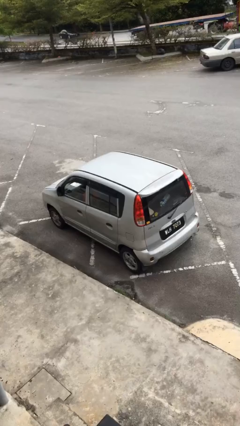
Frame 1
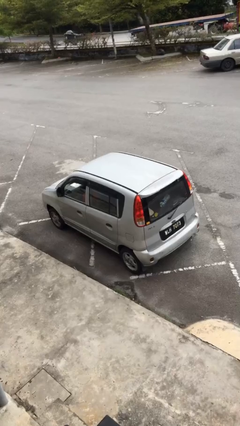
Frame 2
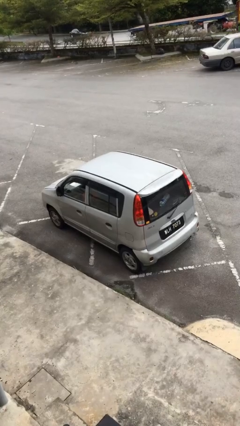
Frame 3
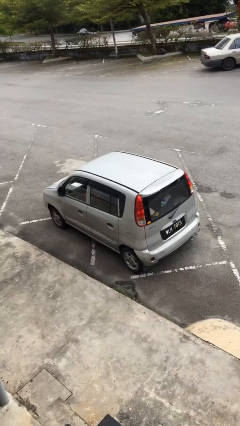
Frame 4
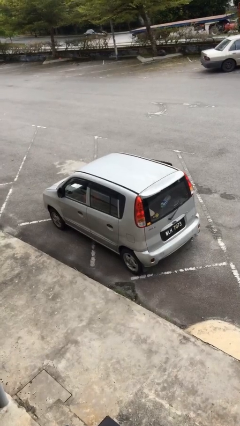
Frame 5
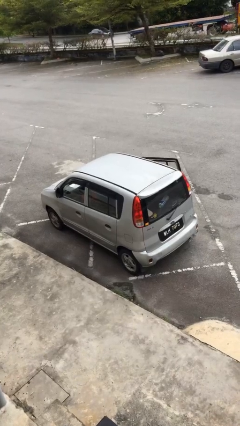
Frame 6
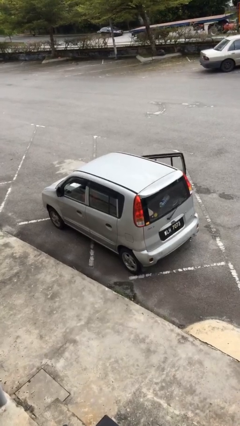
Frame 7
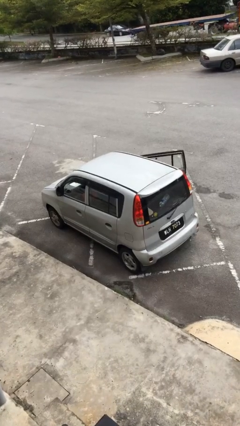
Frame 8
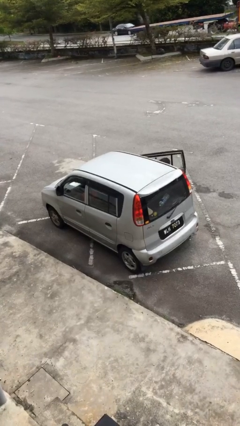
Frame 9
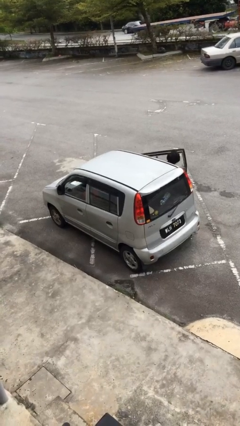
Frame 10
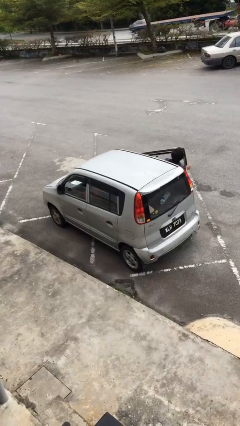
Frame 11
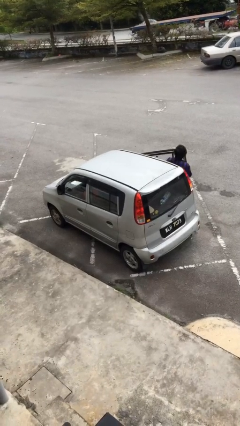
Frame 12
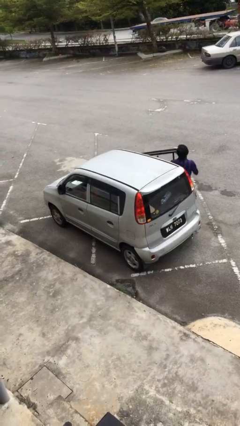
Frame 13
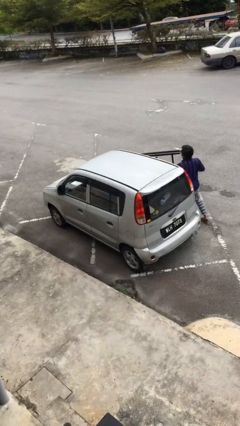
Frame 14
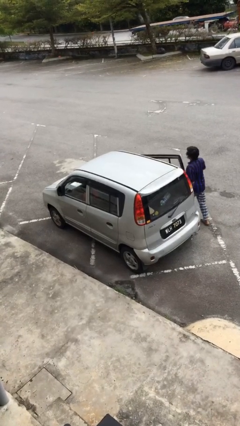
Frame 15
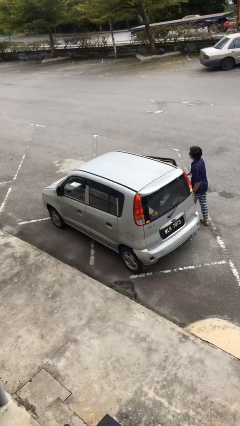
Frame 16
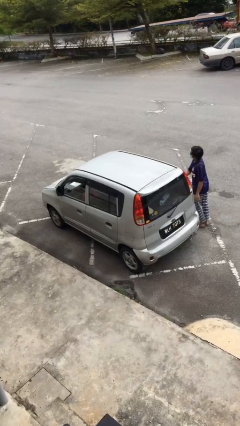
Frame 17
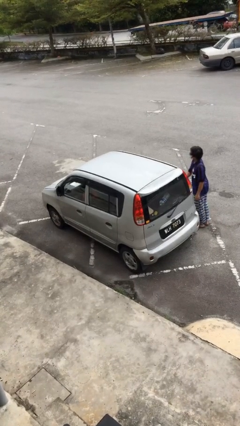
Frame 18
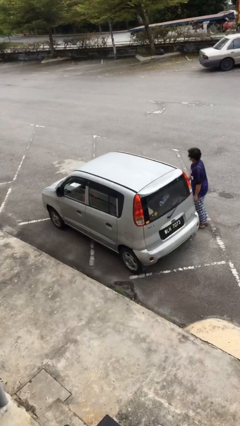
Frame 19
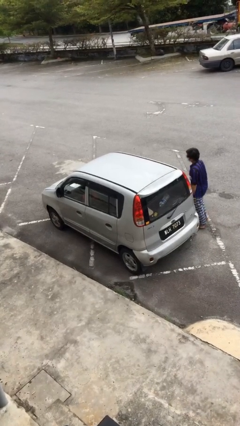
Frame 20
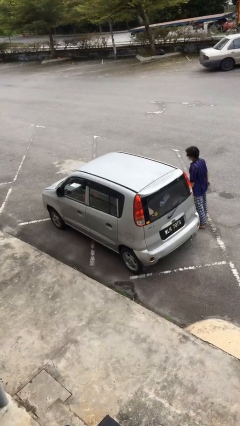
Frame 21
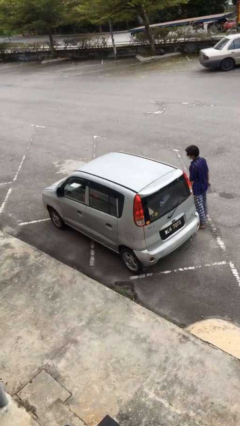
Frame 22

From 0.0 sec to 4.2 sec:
car drops off person

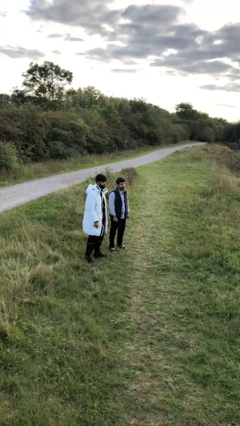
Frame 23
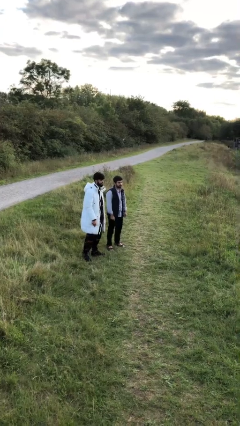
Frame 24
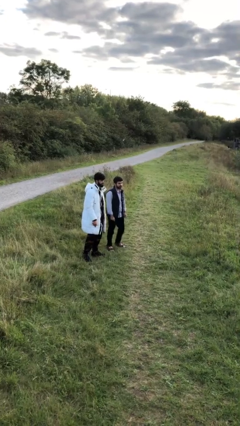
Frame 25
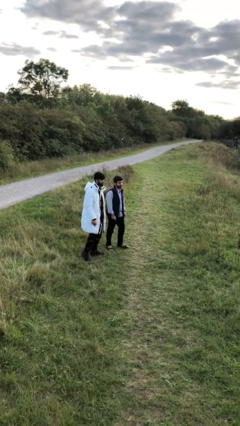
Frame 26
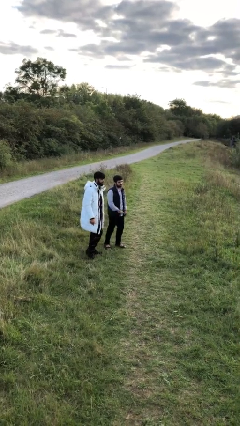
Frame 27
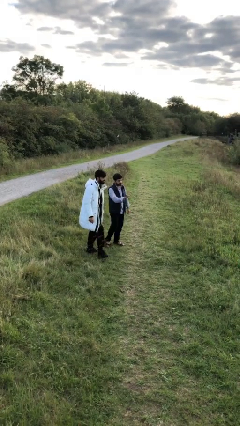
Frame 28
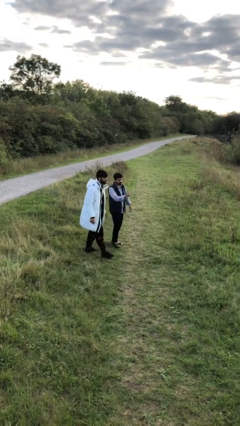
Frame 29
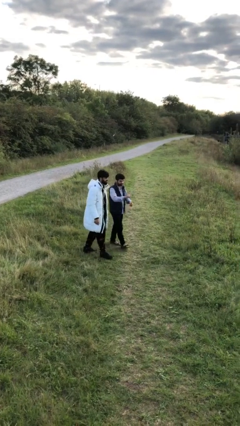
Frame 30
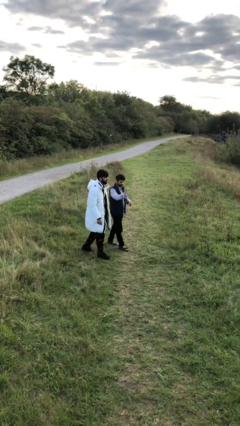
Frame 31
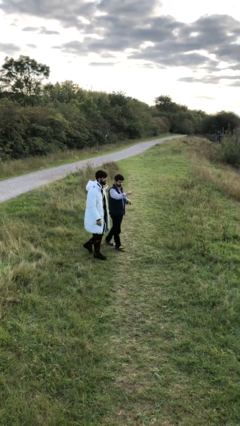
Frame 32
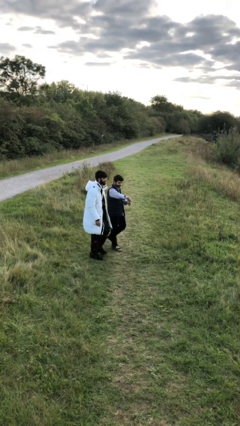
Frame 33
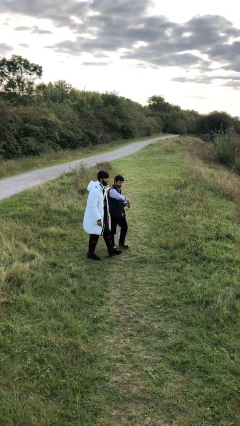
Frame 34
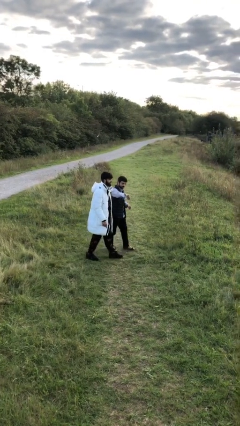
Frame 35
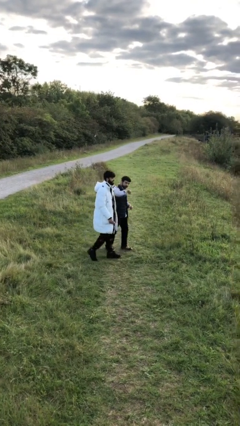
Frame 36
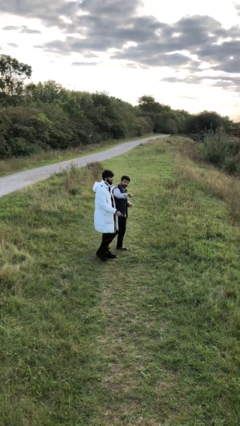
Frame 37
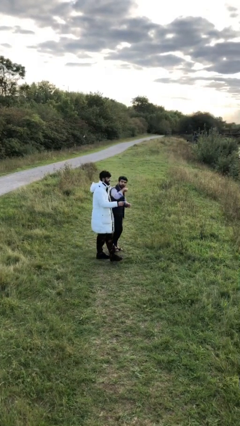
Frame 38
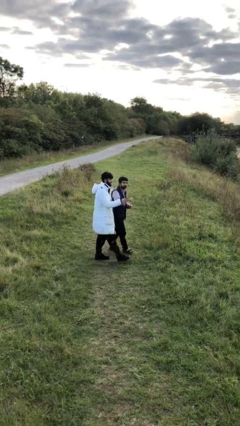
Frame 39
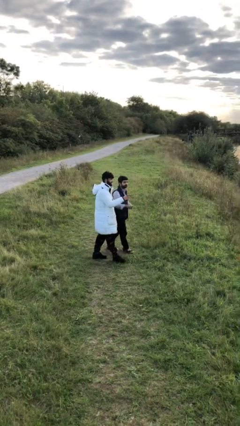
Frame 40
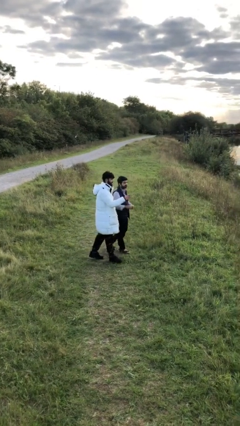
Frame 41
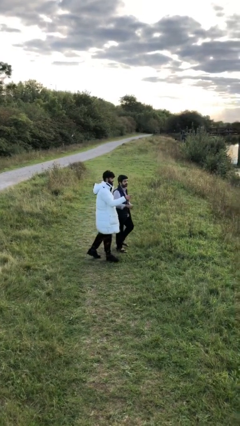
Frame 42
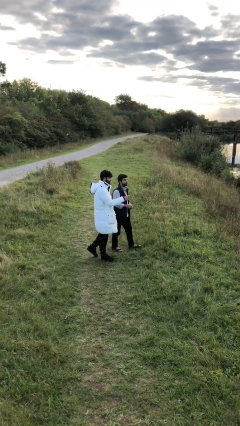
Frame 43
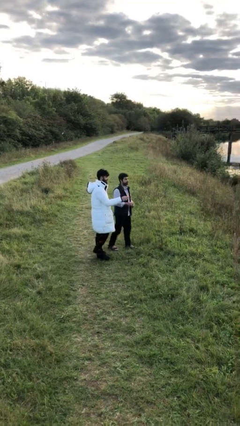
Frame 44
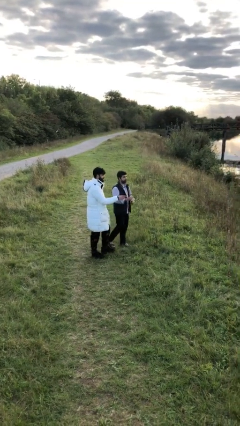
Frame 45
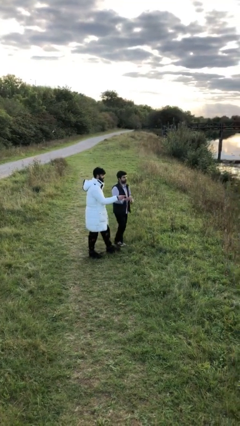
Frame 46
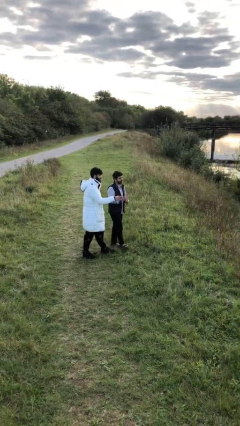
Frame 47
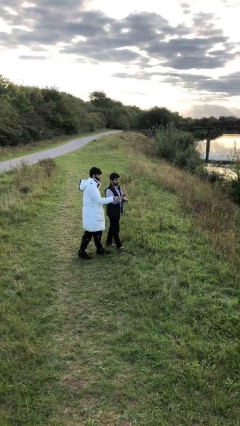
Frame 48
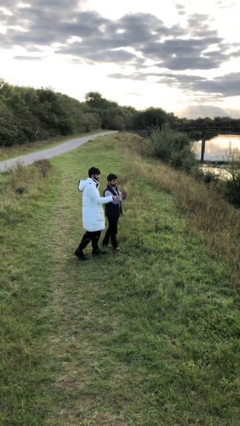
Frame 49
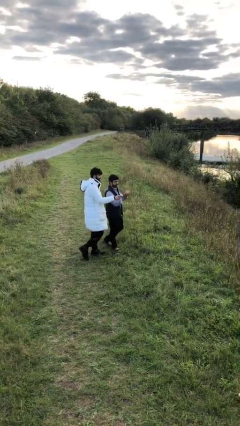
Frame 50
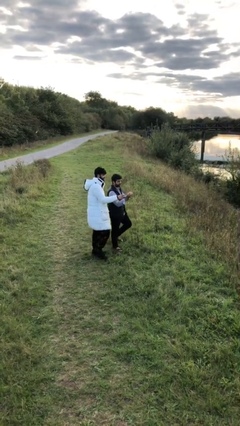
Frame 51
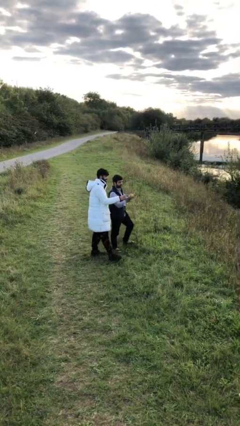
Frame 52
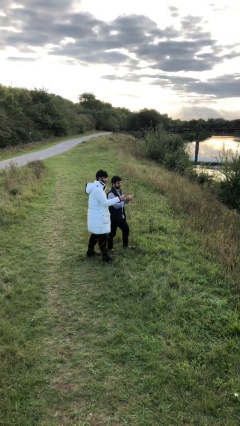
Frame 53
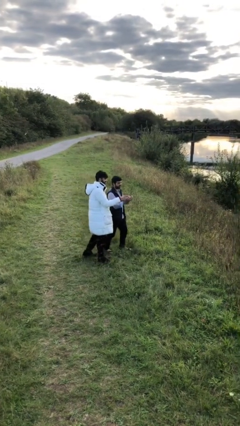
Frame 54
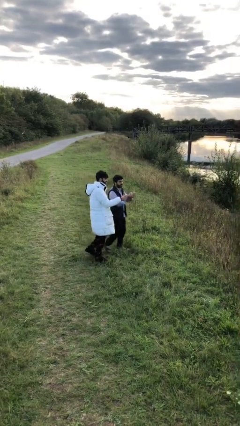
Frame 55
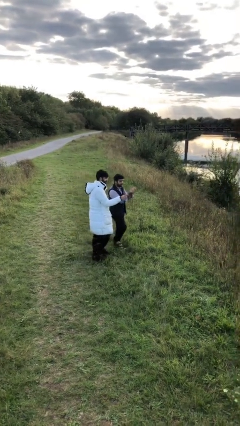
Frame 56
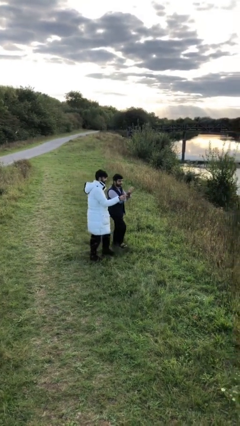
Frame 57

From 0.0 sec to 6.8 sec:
person talks to person

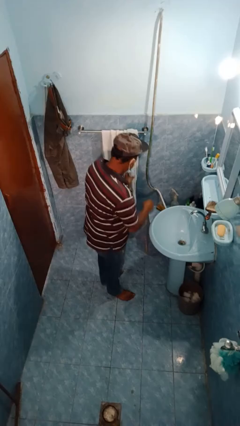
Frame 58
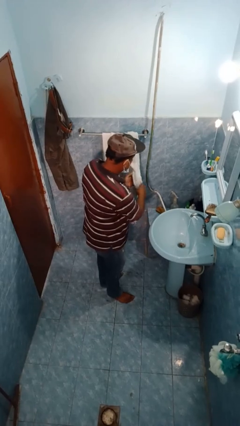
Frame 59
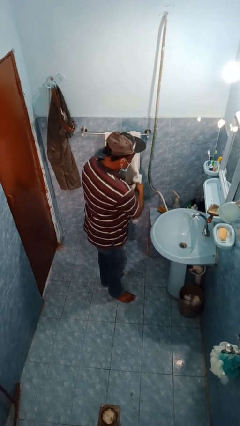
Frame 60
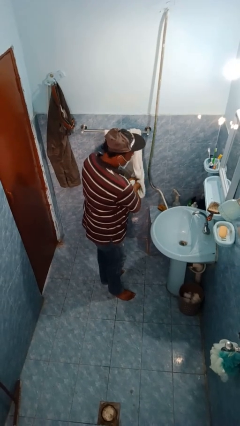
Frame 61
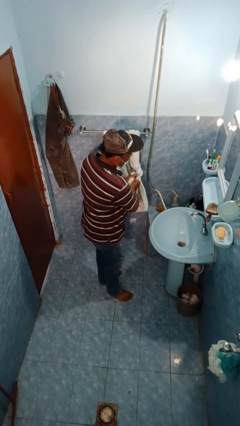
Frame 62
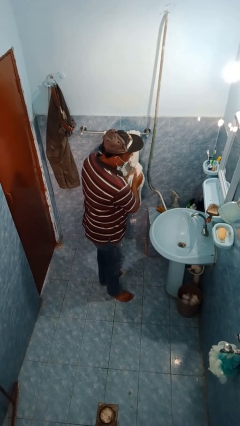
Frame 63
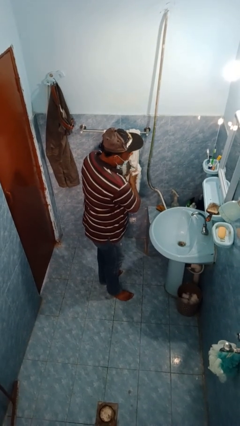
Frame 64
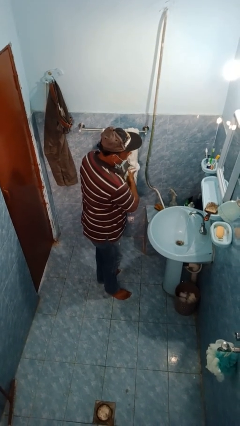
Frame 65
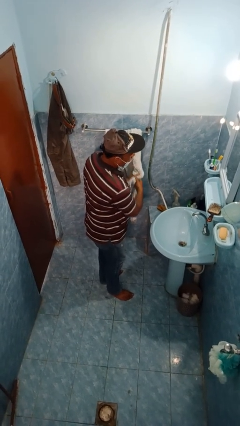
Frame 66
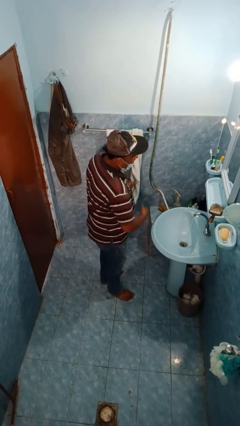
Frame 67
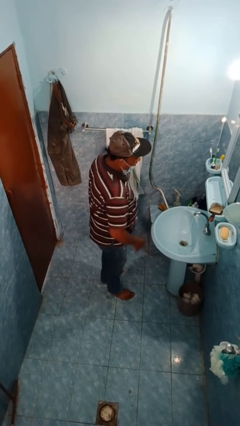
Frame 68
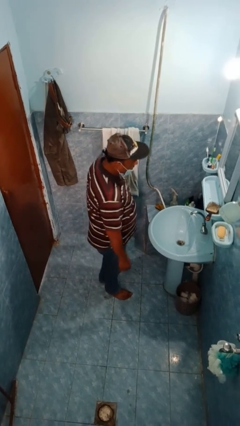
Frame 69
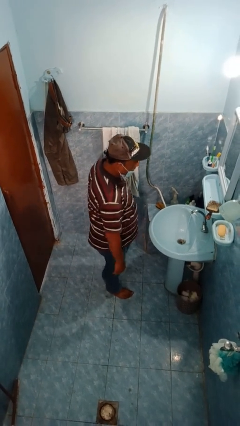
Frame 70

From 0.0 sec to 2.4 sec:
person dries hands with towel

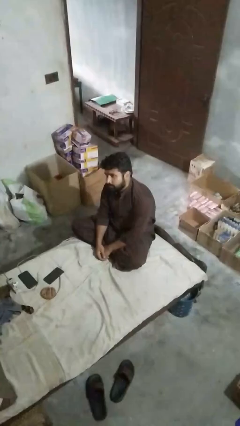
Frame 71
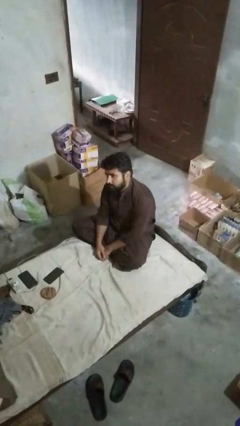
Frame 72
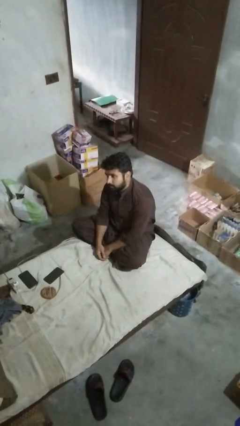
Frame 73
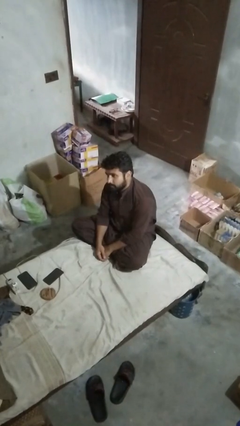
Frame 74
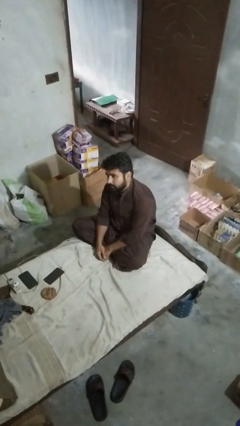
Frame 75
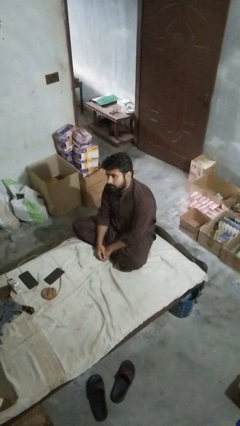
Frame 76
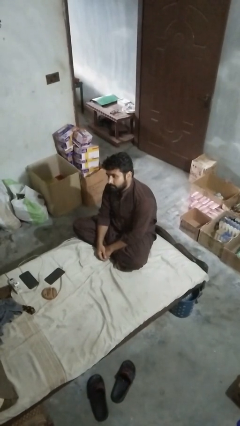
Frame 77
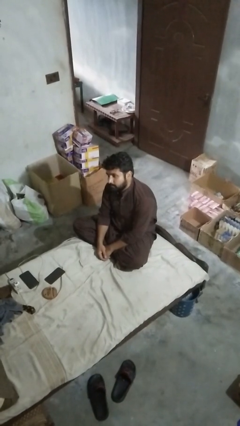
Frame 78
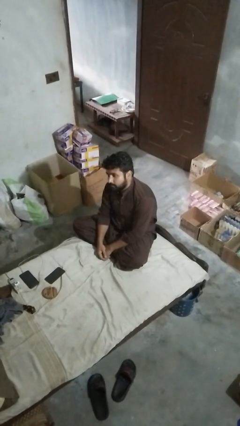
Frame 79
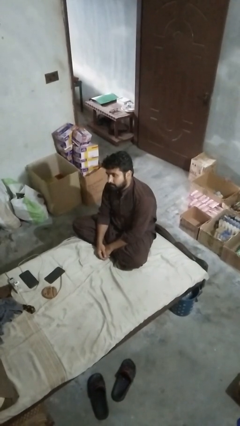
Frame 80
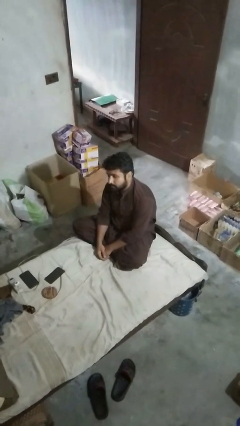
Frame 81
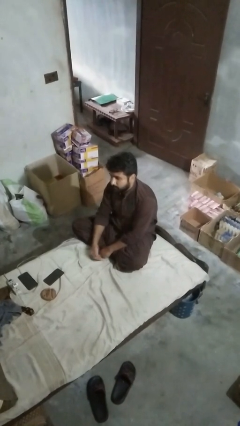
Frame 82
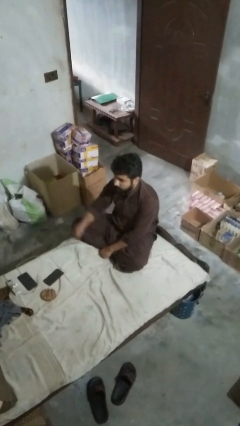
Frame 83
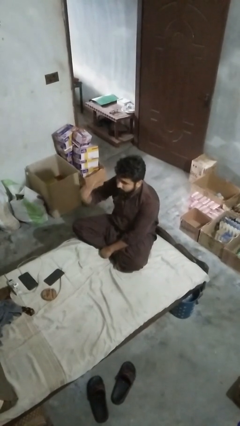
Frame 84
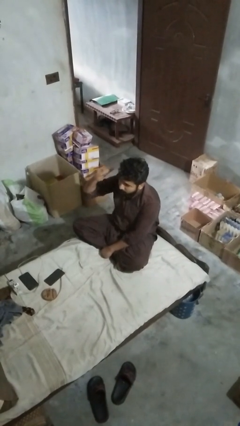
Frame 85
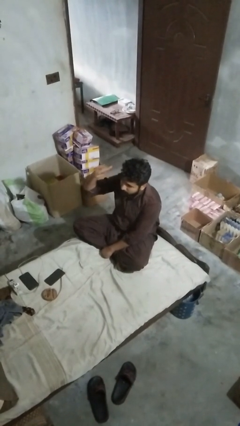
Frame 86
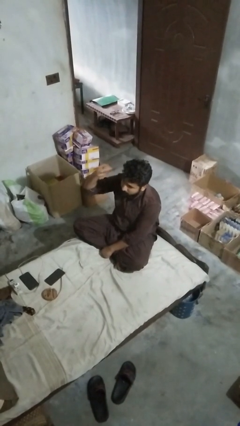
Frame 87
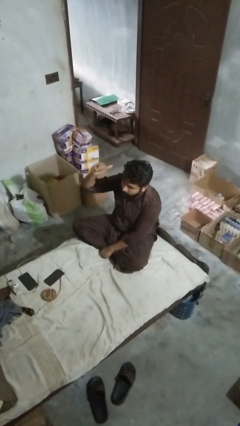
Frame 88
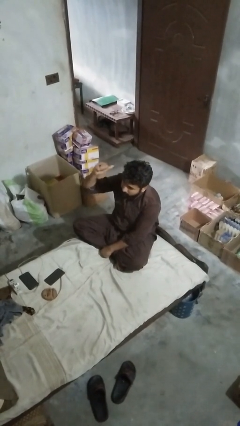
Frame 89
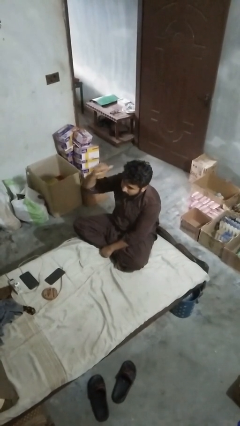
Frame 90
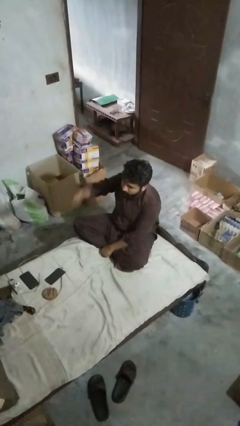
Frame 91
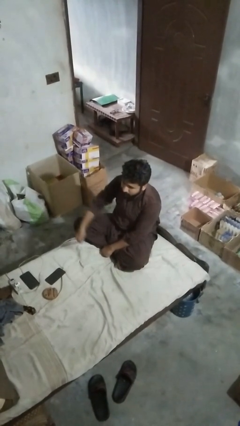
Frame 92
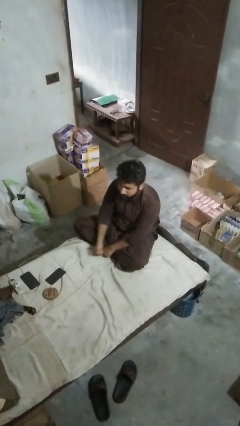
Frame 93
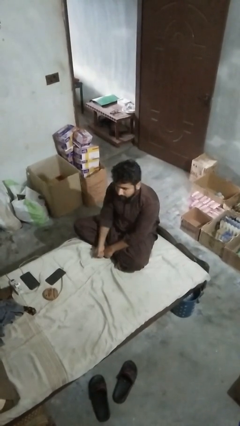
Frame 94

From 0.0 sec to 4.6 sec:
person gestures behind me

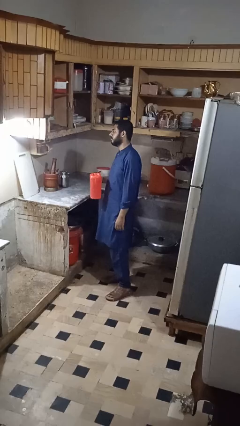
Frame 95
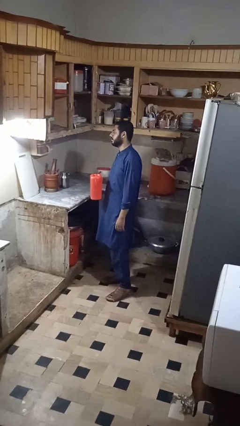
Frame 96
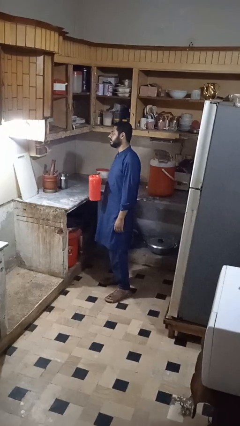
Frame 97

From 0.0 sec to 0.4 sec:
person puts down object on countertop
